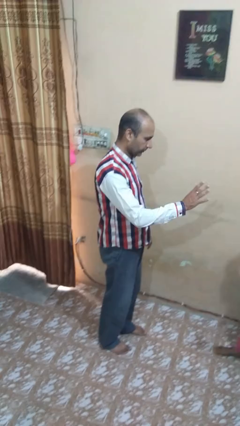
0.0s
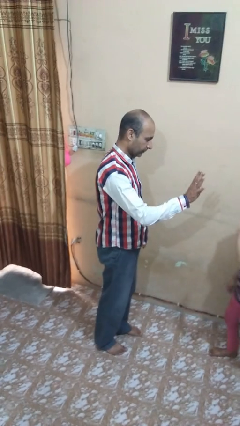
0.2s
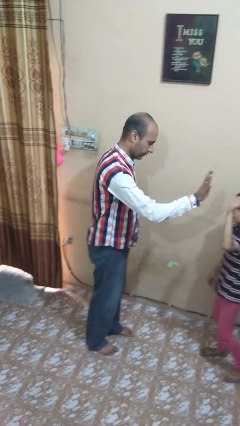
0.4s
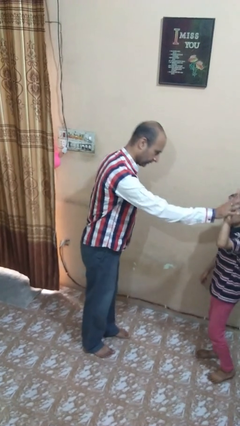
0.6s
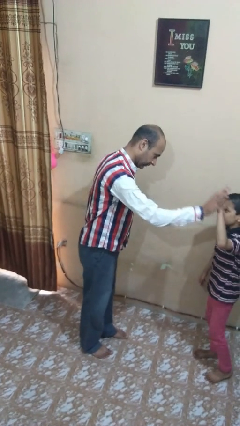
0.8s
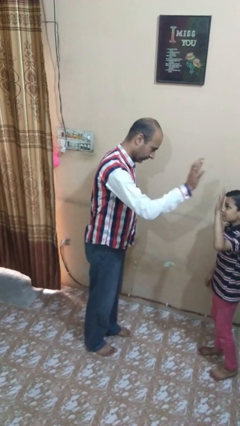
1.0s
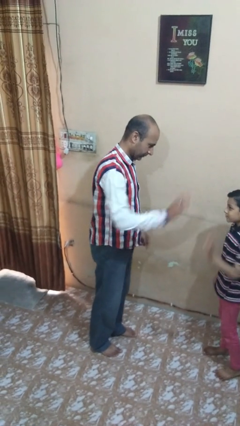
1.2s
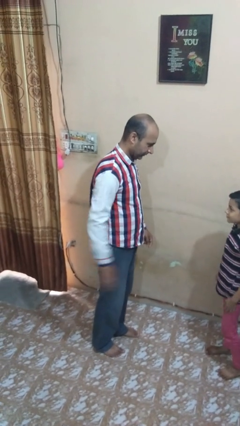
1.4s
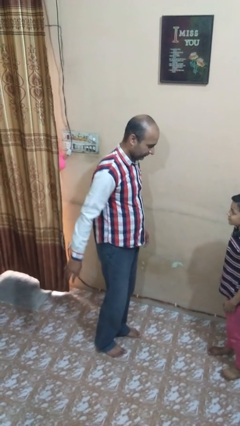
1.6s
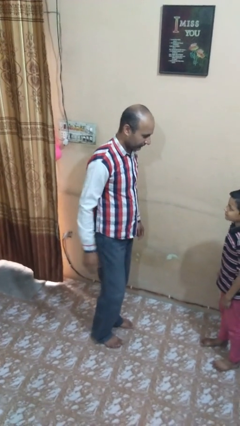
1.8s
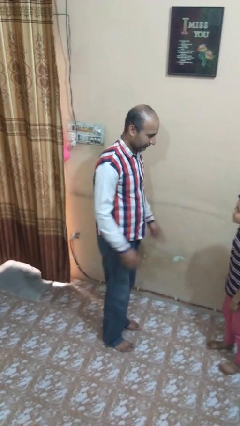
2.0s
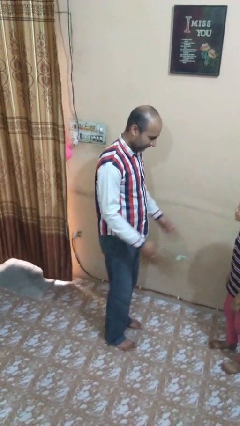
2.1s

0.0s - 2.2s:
person highfives hand

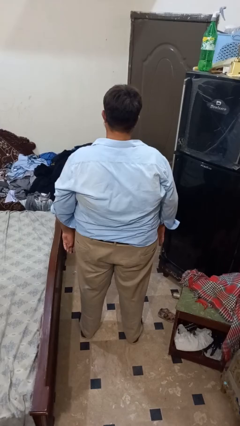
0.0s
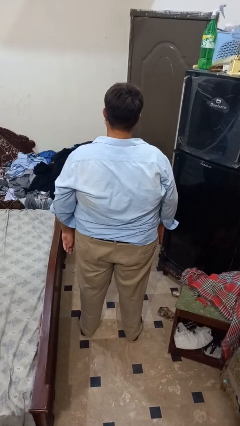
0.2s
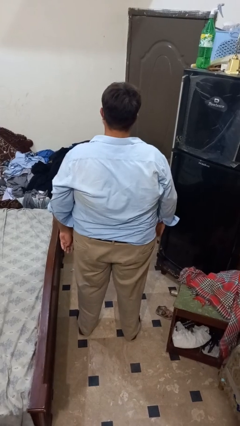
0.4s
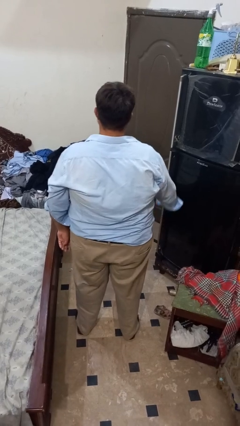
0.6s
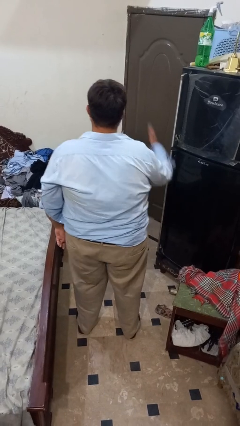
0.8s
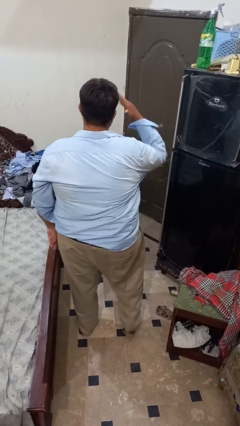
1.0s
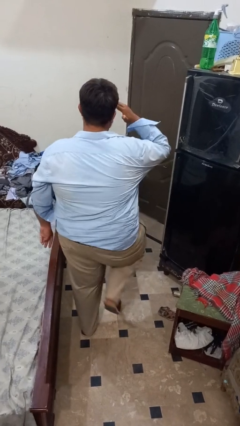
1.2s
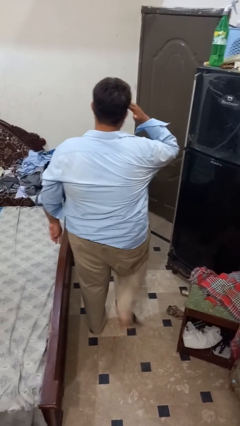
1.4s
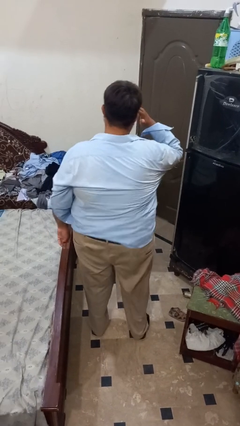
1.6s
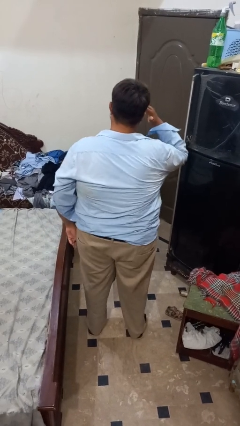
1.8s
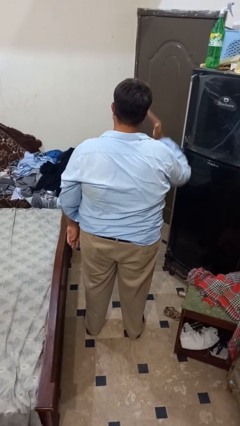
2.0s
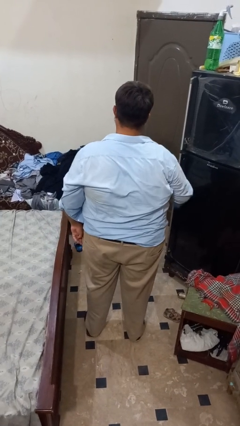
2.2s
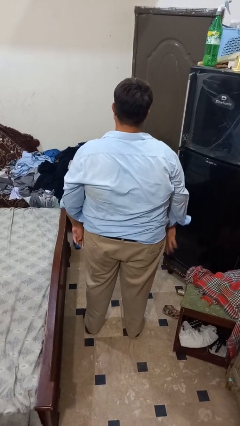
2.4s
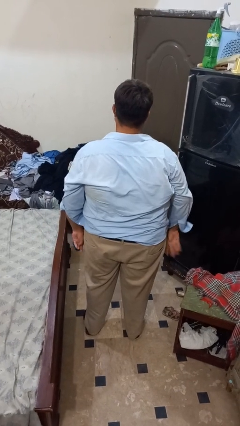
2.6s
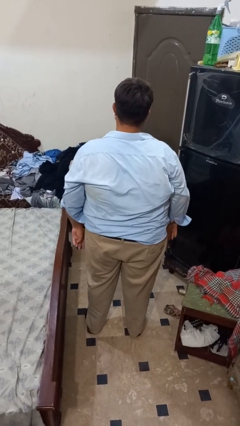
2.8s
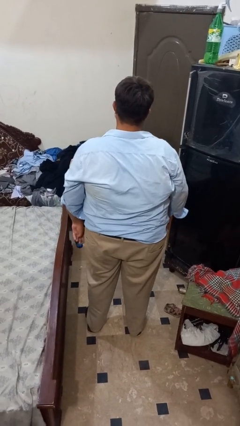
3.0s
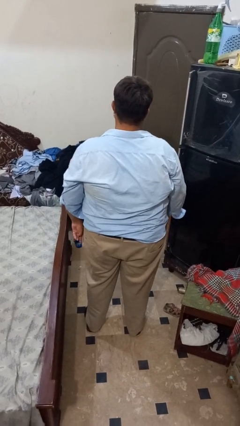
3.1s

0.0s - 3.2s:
person salutes

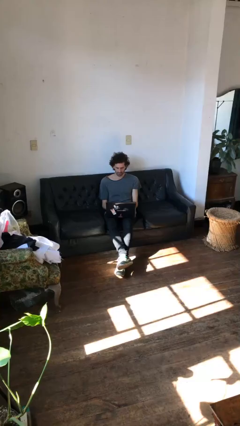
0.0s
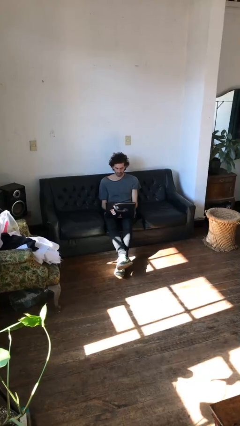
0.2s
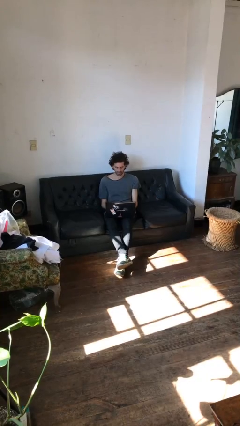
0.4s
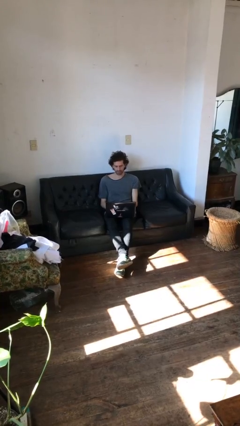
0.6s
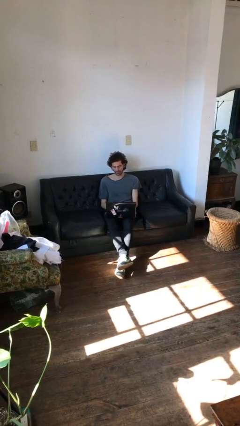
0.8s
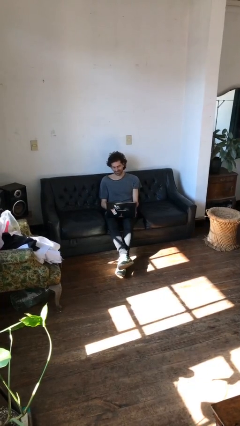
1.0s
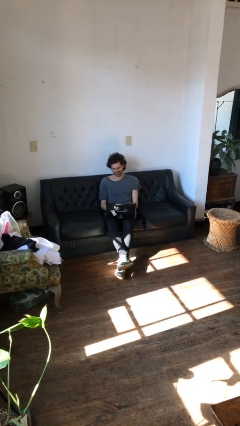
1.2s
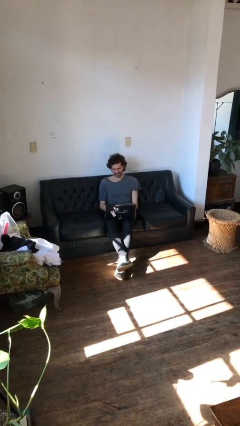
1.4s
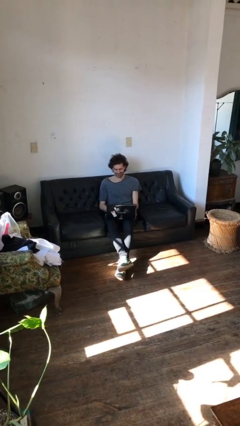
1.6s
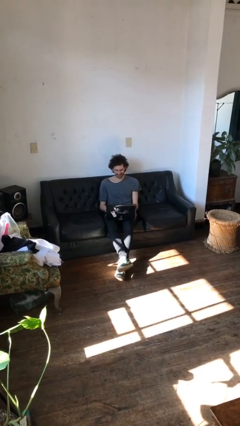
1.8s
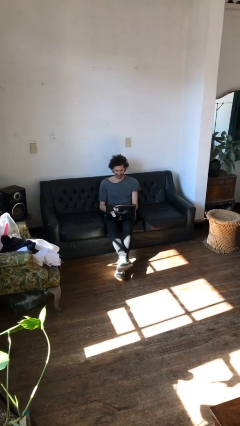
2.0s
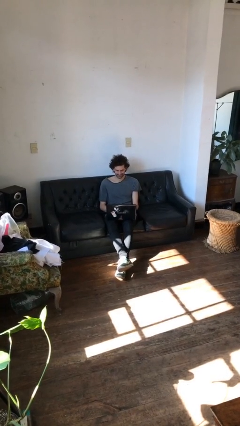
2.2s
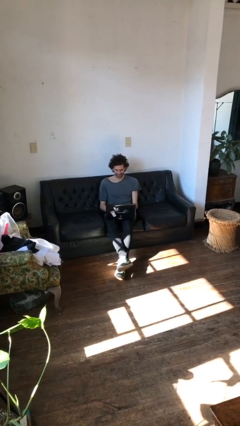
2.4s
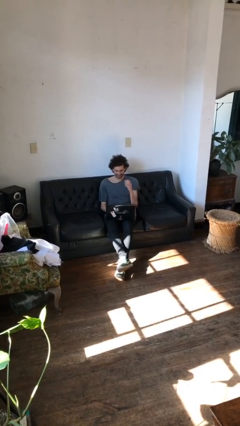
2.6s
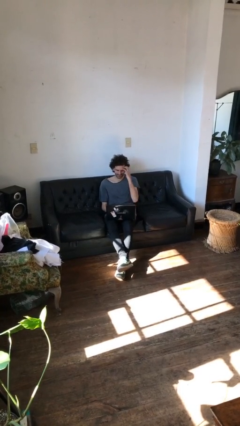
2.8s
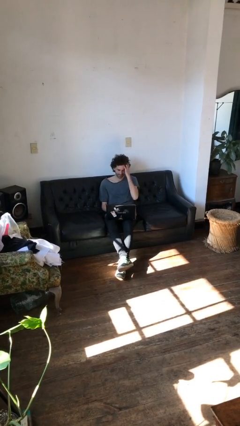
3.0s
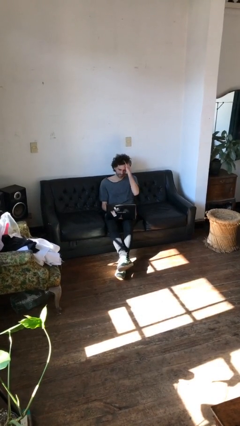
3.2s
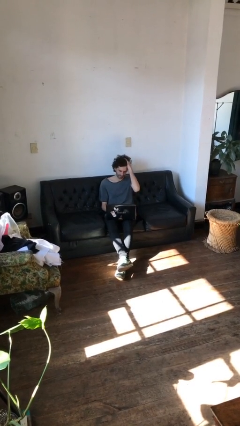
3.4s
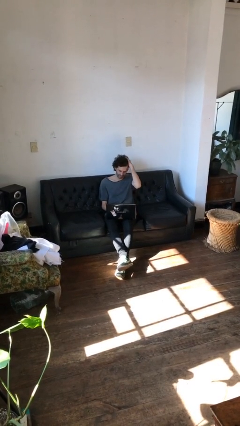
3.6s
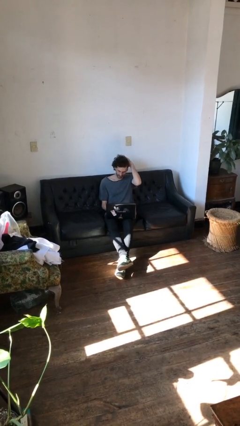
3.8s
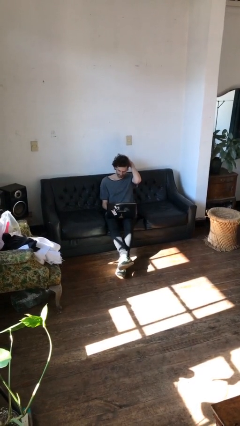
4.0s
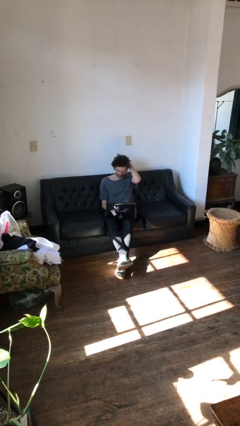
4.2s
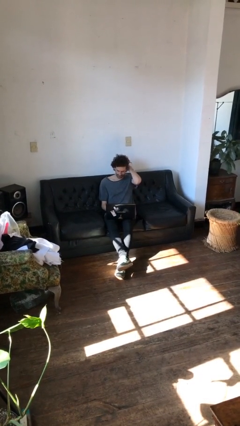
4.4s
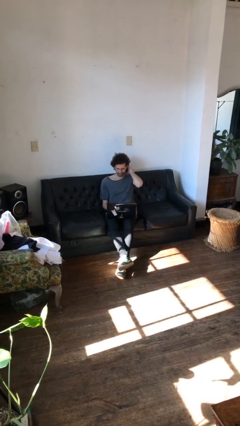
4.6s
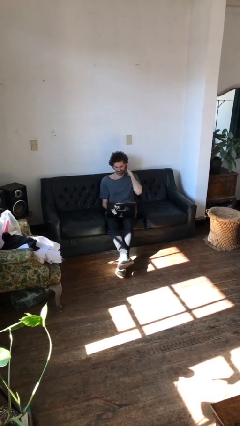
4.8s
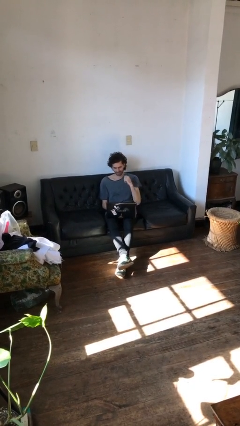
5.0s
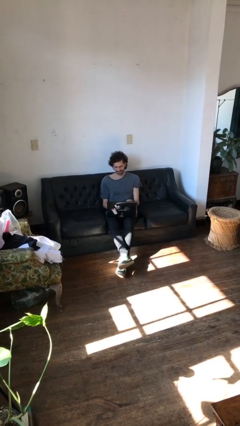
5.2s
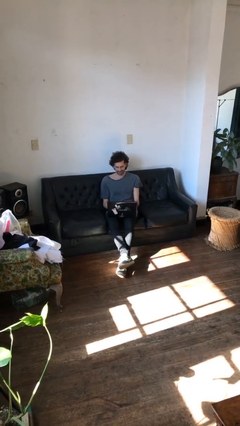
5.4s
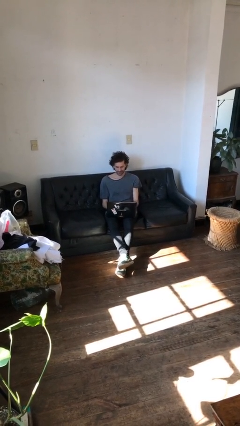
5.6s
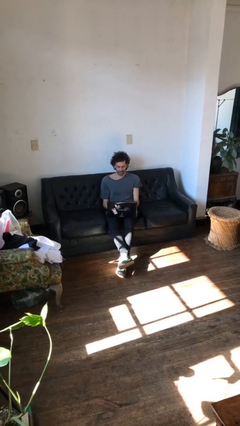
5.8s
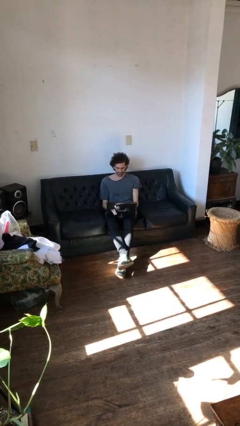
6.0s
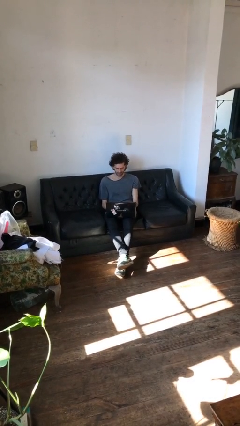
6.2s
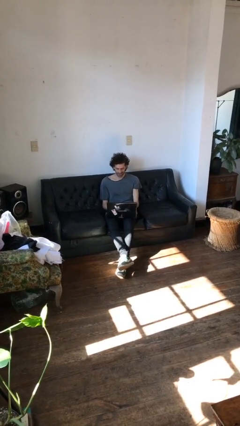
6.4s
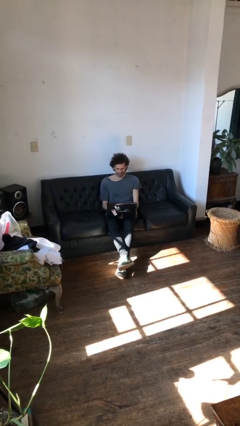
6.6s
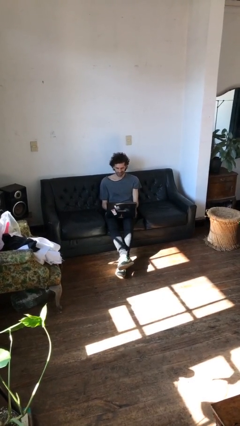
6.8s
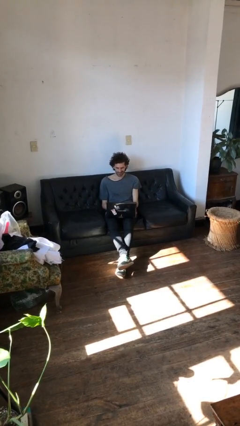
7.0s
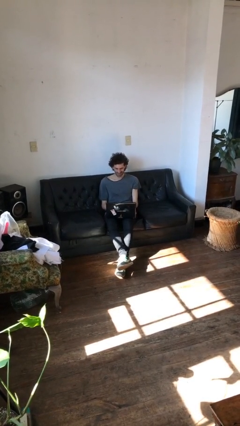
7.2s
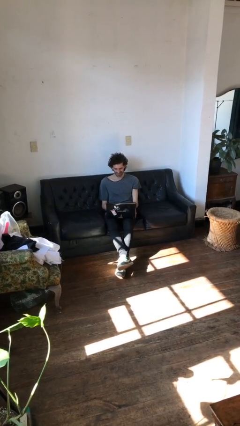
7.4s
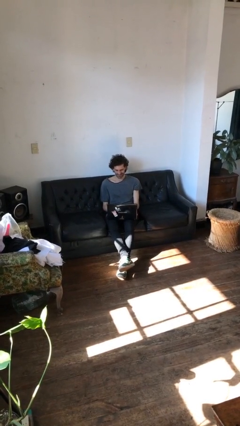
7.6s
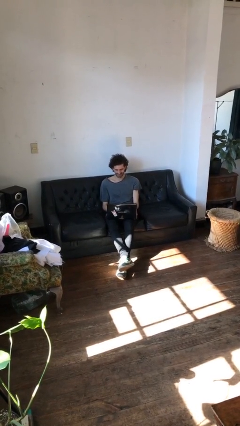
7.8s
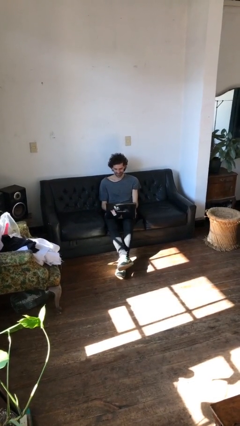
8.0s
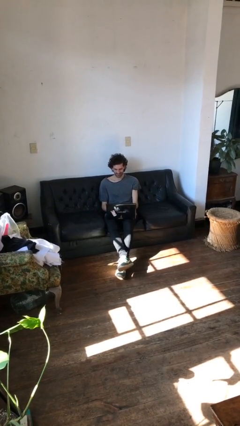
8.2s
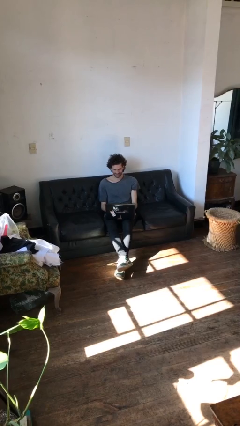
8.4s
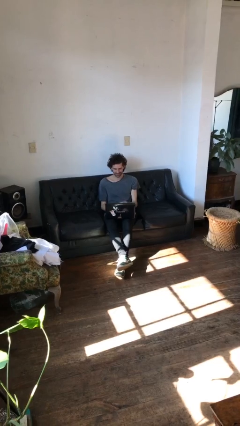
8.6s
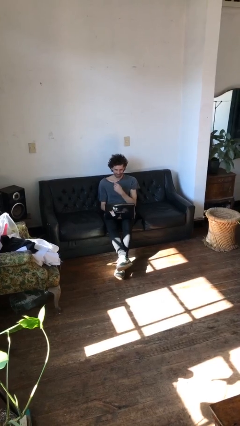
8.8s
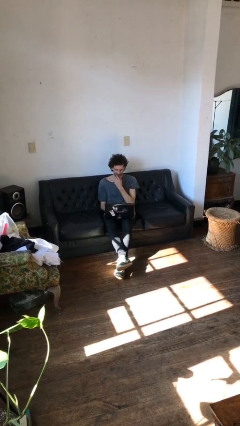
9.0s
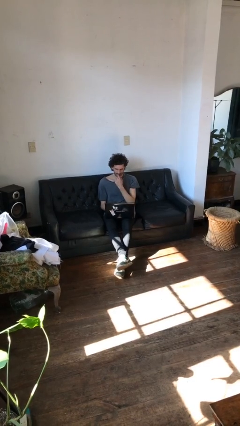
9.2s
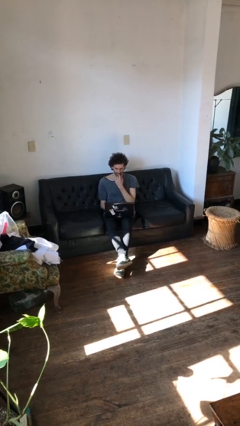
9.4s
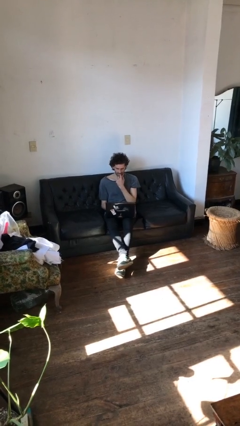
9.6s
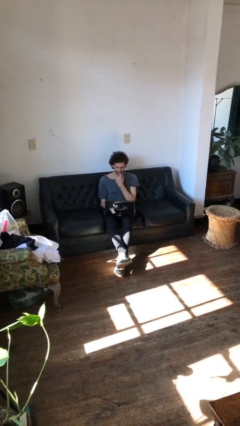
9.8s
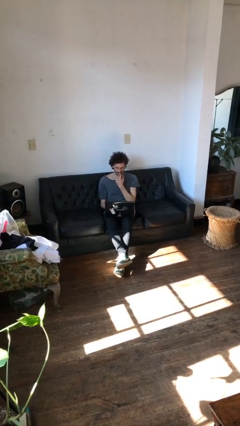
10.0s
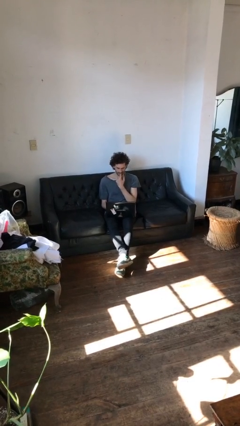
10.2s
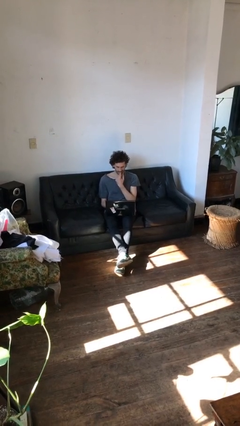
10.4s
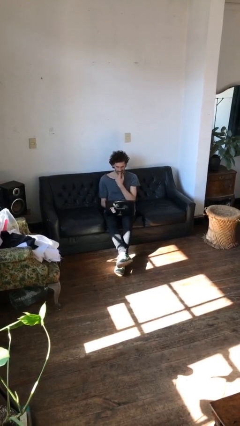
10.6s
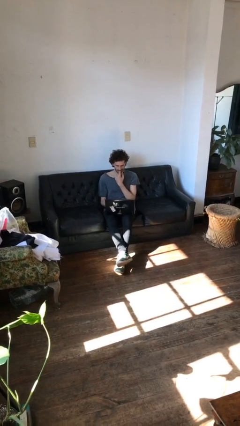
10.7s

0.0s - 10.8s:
person interacts with laptop

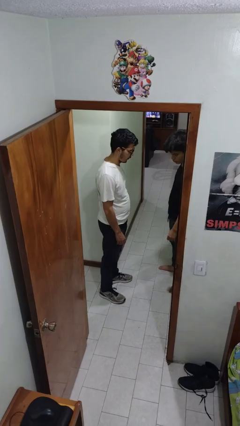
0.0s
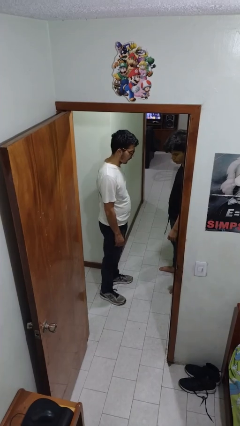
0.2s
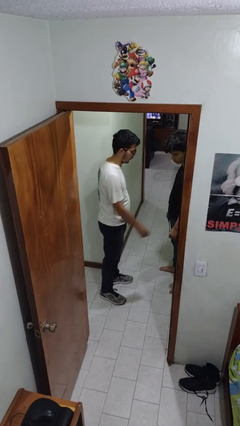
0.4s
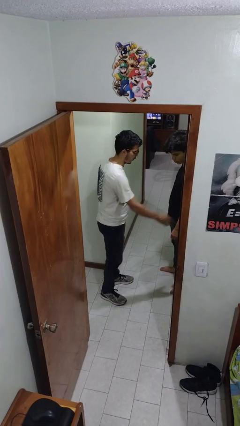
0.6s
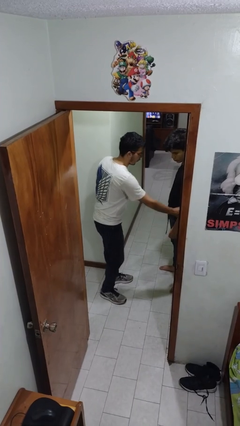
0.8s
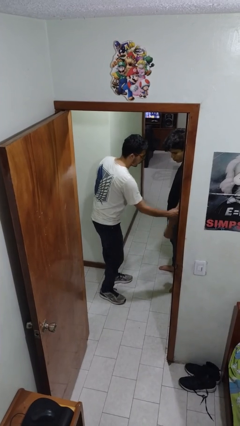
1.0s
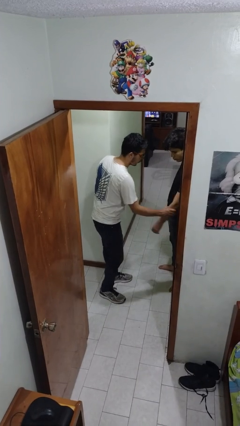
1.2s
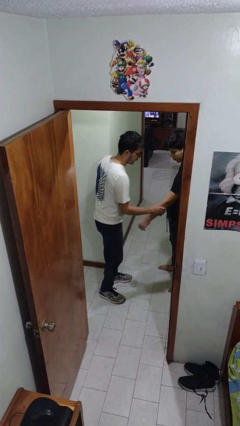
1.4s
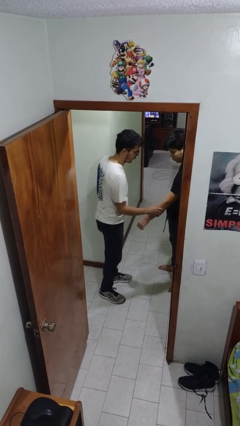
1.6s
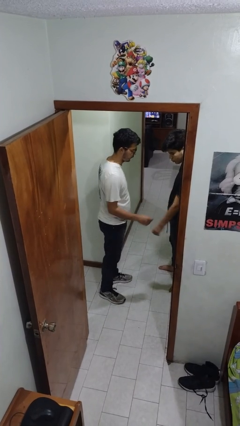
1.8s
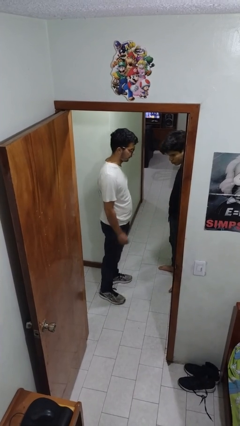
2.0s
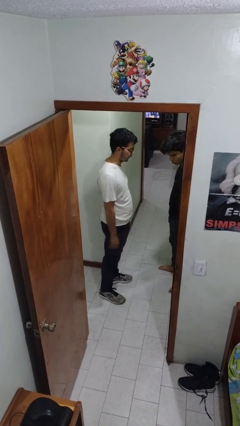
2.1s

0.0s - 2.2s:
person grabs person by forearm
